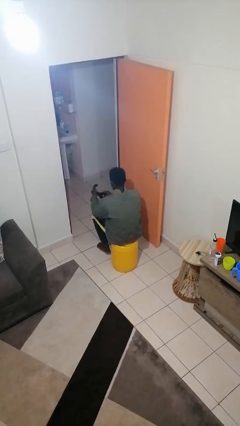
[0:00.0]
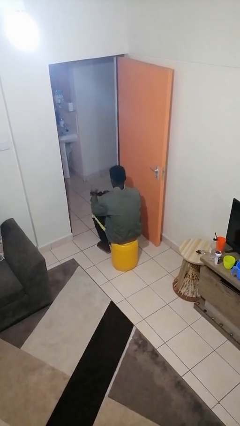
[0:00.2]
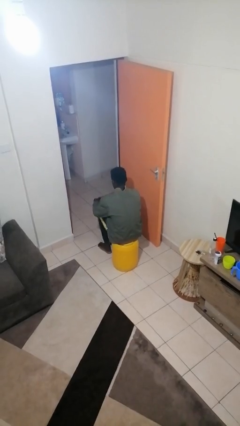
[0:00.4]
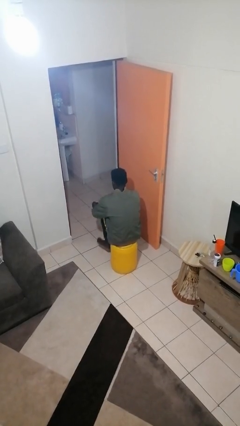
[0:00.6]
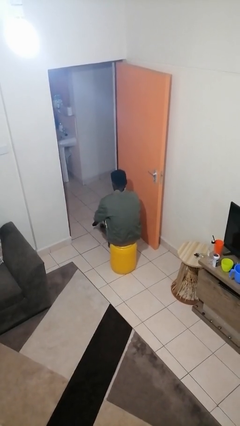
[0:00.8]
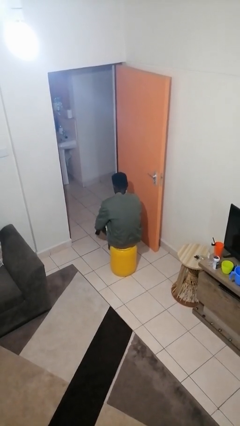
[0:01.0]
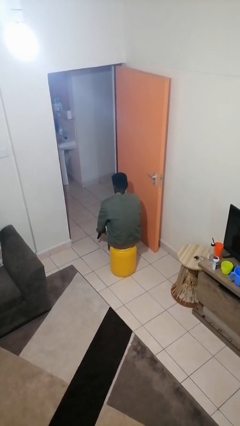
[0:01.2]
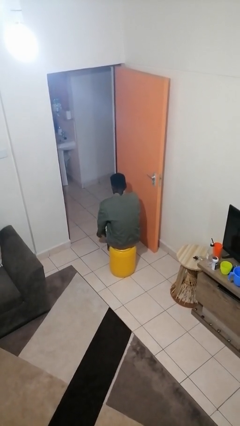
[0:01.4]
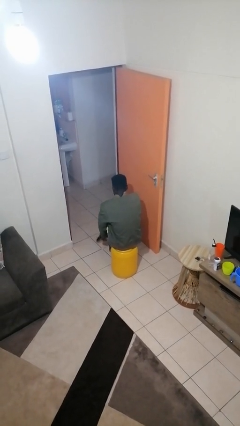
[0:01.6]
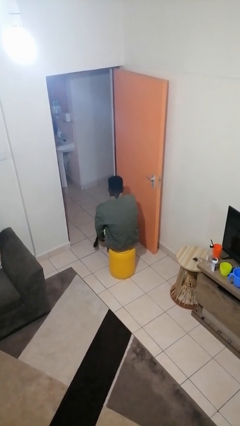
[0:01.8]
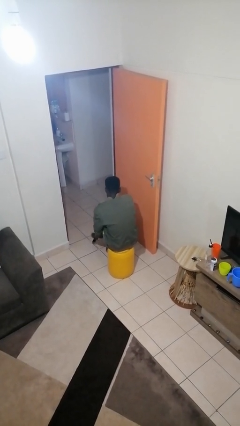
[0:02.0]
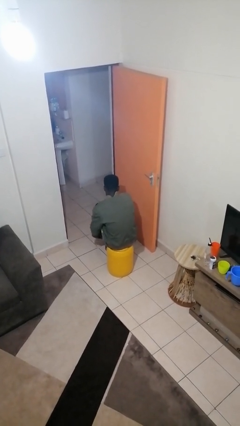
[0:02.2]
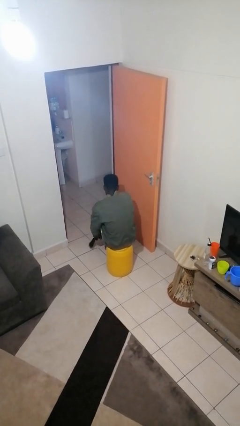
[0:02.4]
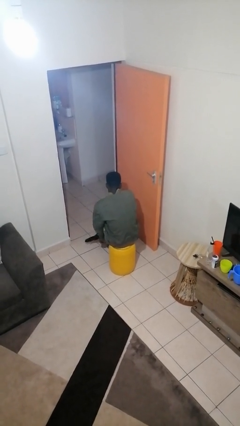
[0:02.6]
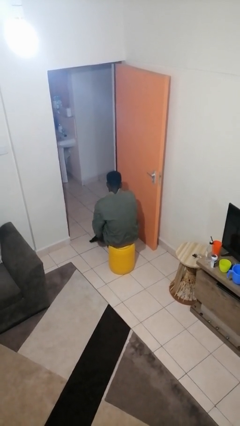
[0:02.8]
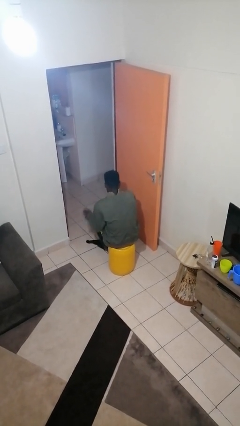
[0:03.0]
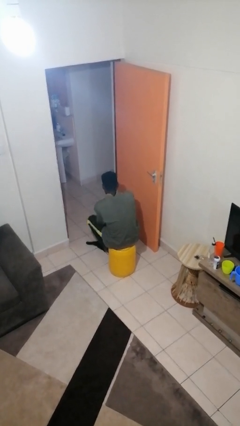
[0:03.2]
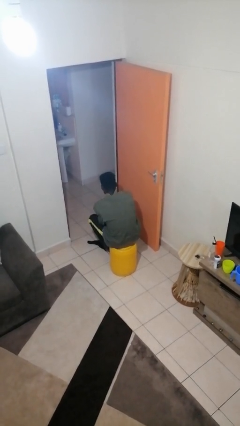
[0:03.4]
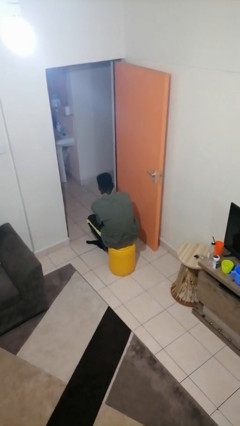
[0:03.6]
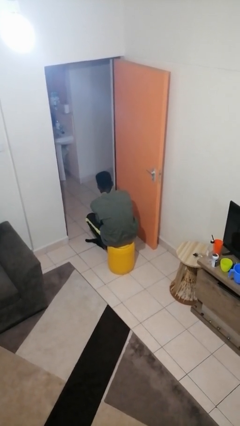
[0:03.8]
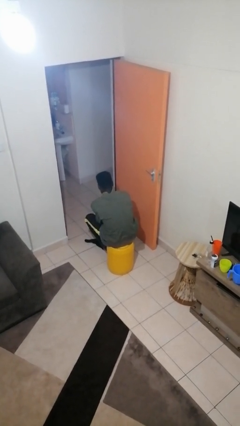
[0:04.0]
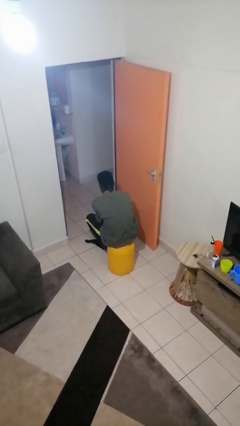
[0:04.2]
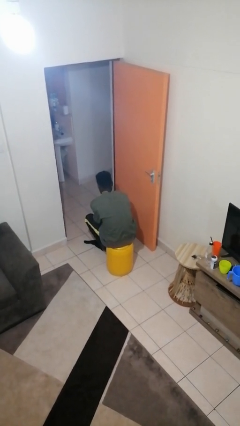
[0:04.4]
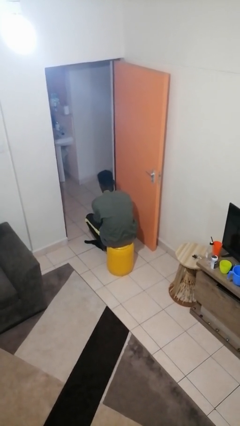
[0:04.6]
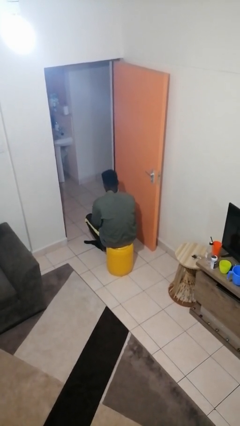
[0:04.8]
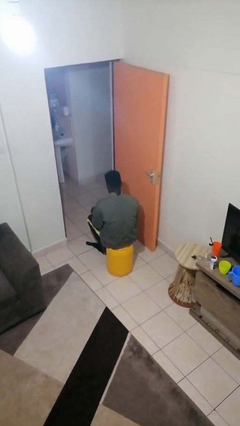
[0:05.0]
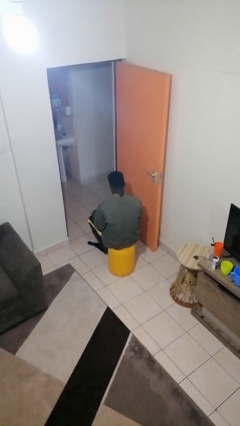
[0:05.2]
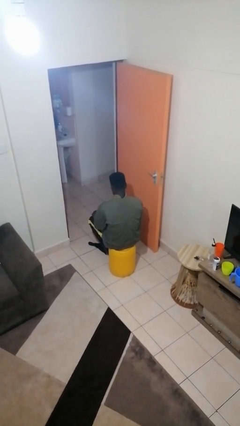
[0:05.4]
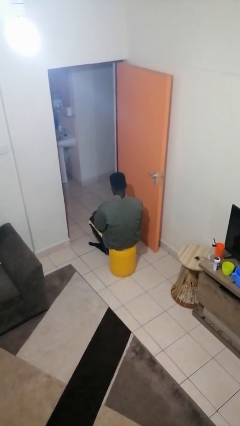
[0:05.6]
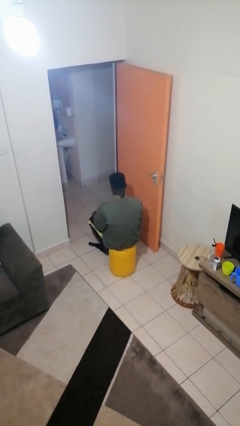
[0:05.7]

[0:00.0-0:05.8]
person puts on socks

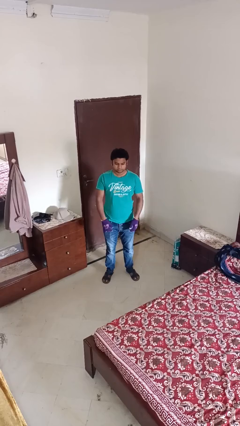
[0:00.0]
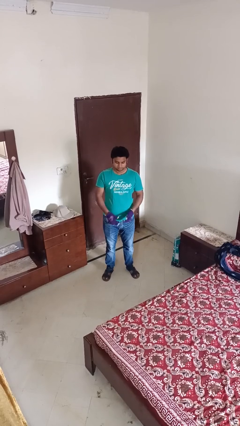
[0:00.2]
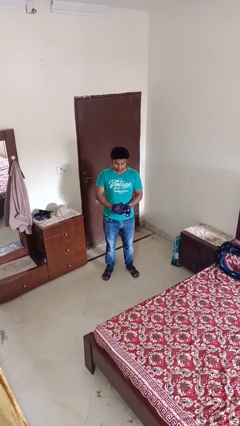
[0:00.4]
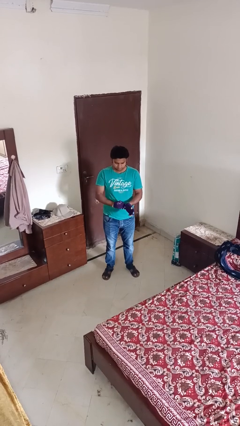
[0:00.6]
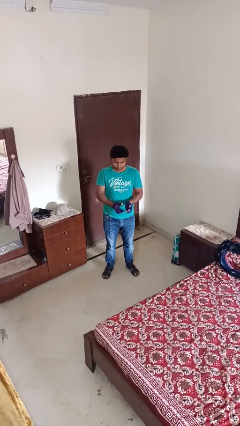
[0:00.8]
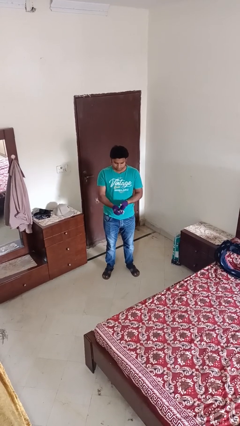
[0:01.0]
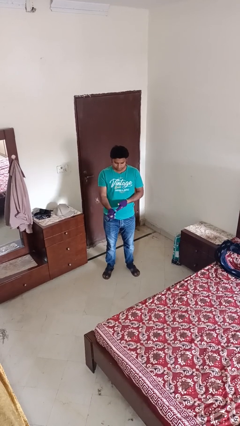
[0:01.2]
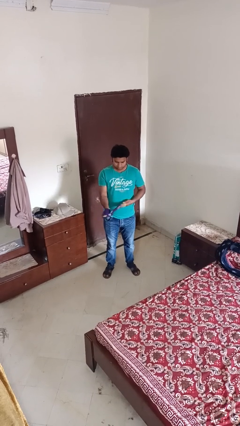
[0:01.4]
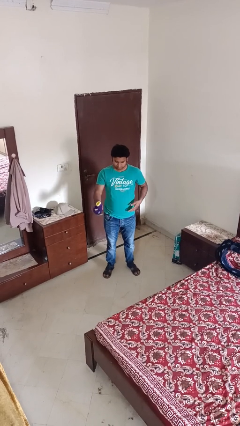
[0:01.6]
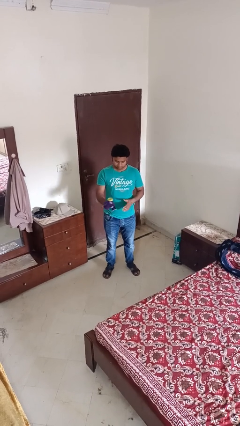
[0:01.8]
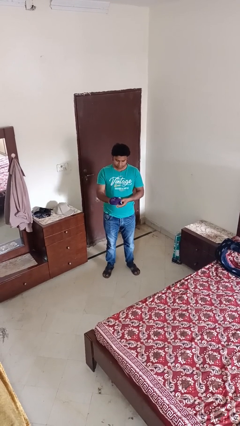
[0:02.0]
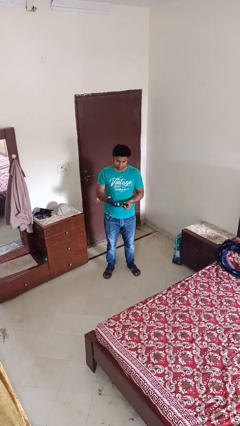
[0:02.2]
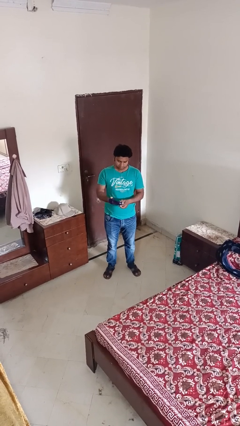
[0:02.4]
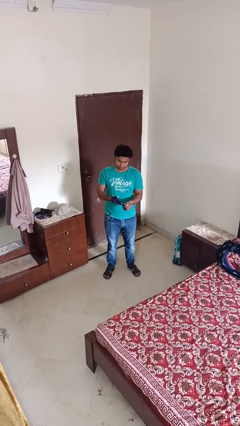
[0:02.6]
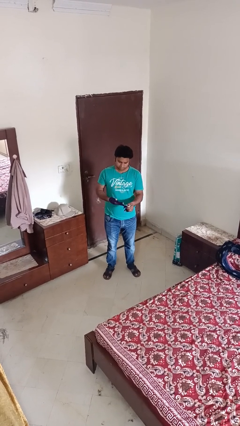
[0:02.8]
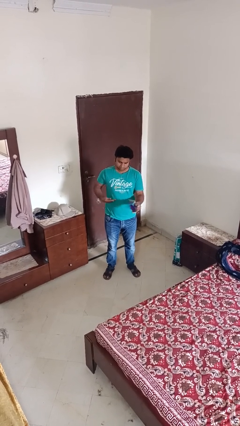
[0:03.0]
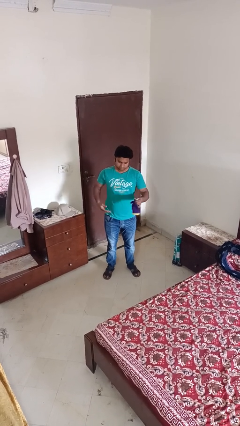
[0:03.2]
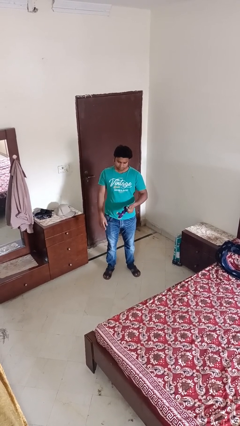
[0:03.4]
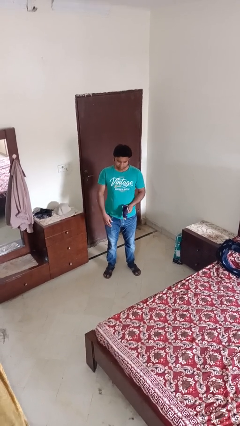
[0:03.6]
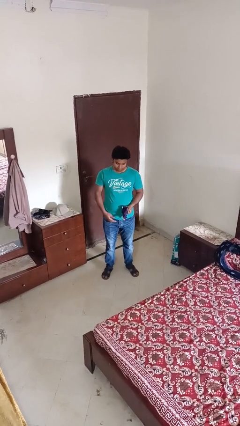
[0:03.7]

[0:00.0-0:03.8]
person takes off gloves

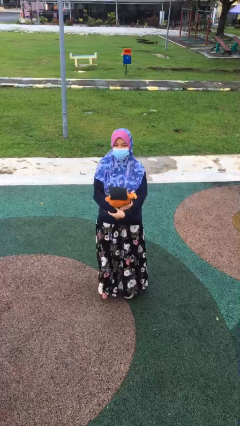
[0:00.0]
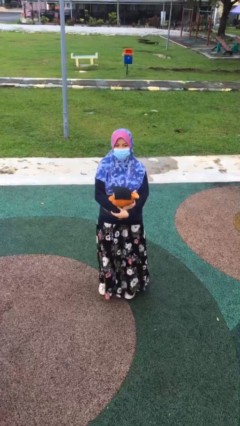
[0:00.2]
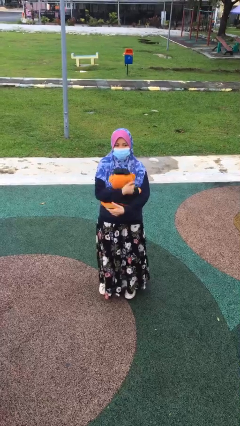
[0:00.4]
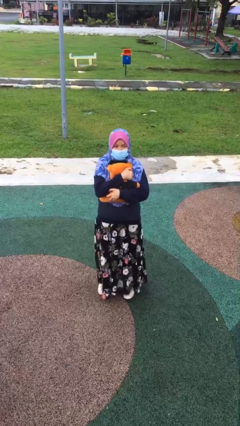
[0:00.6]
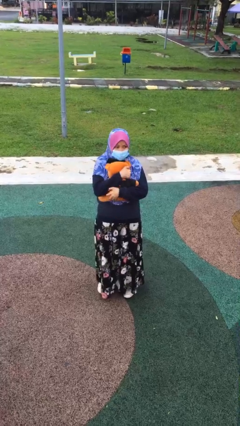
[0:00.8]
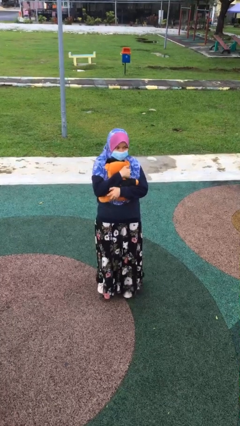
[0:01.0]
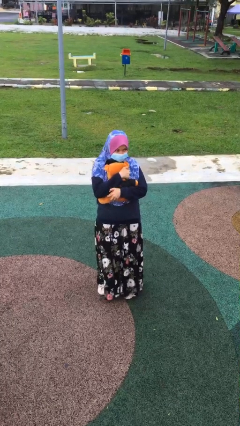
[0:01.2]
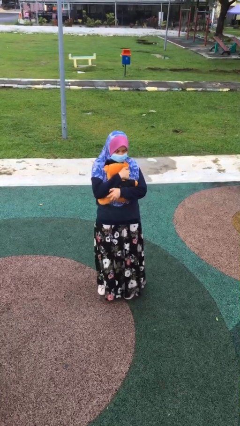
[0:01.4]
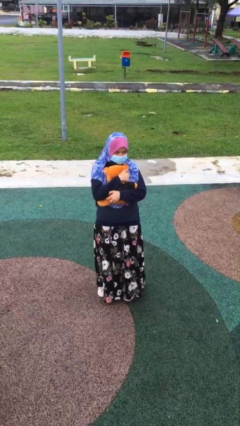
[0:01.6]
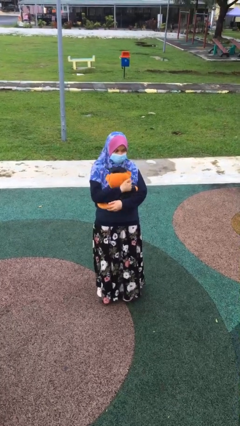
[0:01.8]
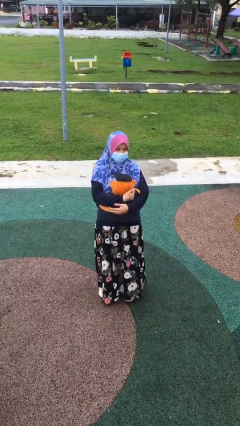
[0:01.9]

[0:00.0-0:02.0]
person hugs stuffed animal

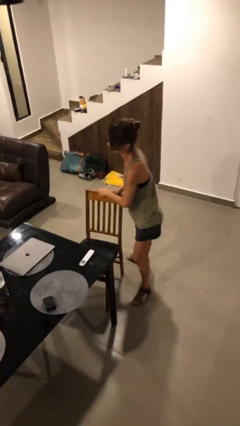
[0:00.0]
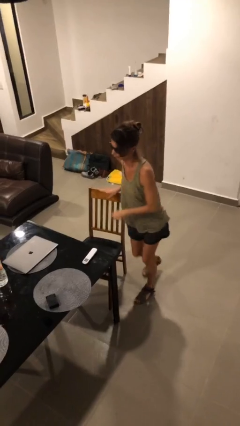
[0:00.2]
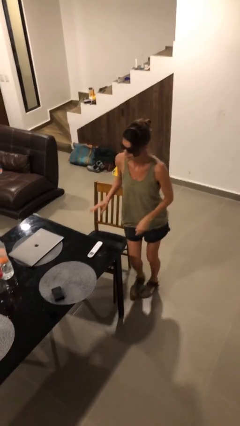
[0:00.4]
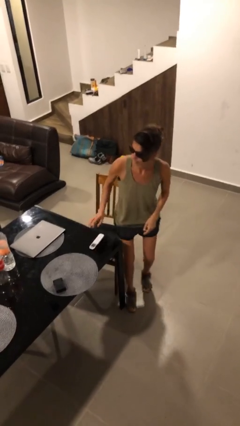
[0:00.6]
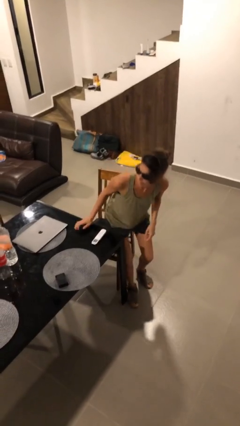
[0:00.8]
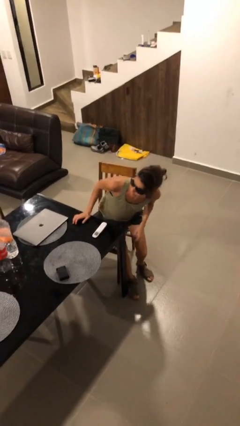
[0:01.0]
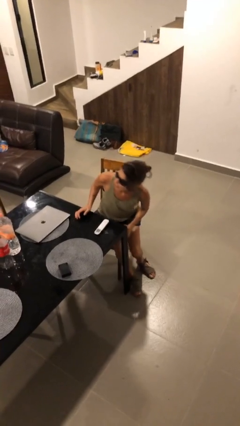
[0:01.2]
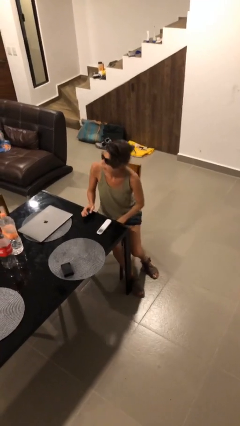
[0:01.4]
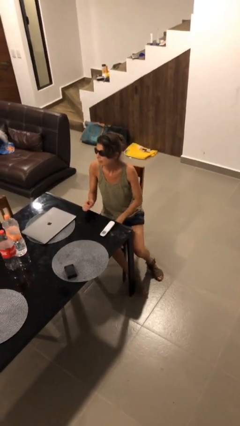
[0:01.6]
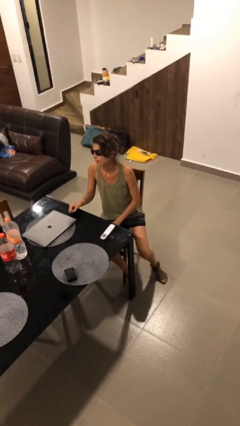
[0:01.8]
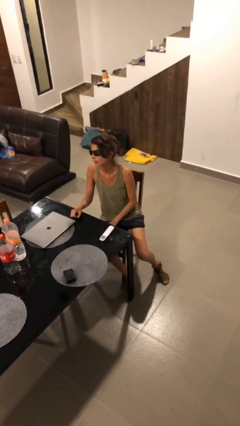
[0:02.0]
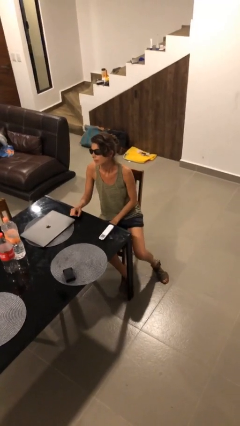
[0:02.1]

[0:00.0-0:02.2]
person sits down

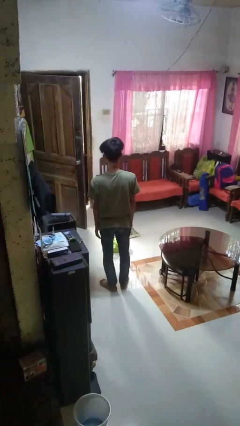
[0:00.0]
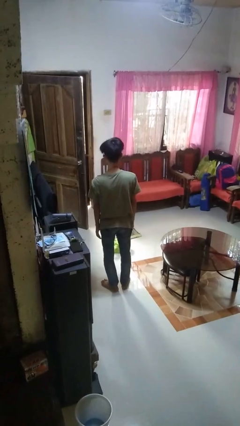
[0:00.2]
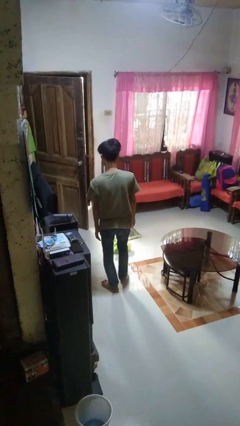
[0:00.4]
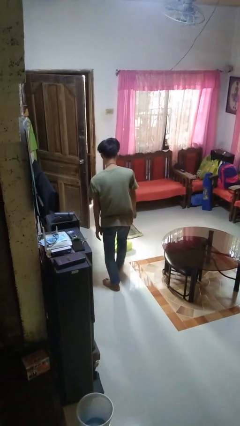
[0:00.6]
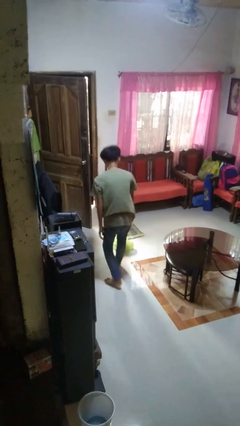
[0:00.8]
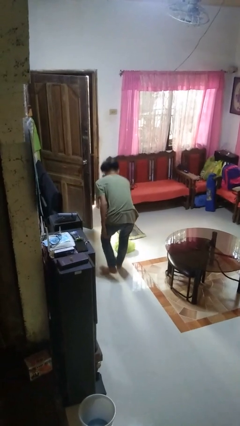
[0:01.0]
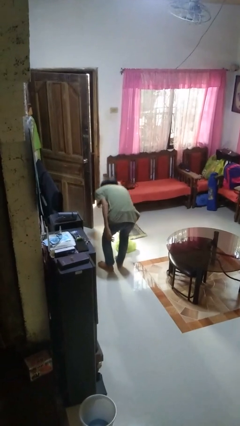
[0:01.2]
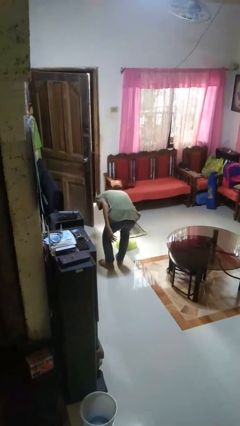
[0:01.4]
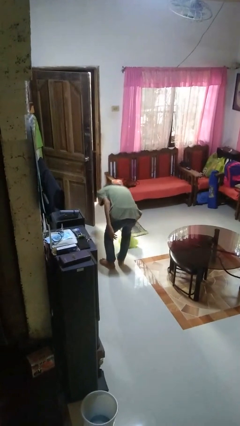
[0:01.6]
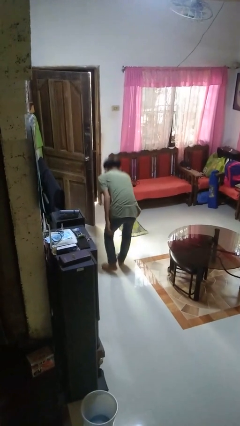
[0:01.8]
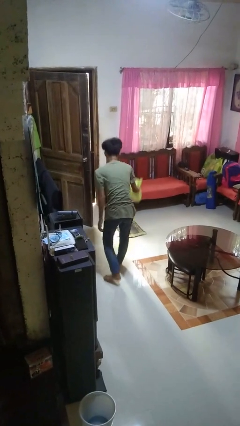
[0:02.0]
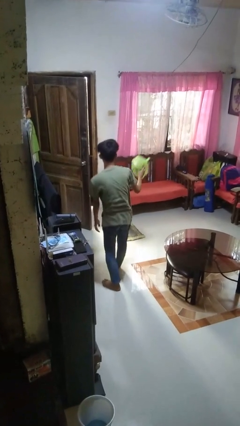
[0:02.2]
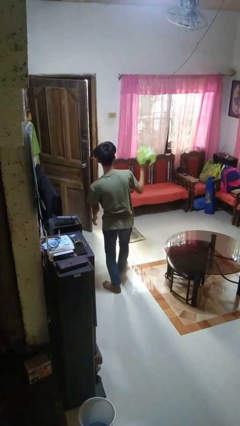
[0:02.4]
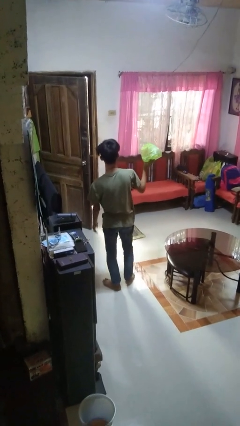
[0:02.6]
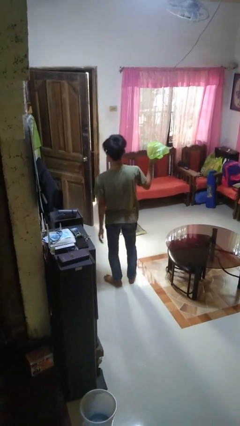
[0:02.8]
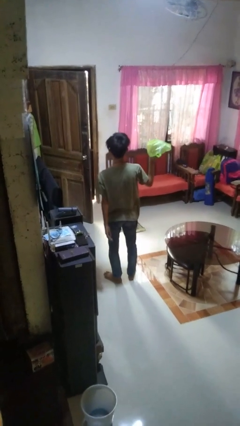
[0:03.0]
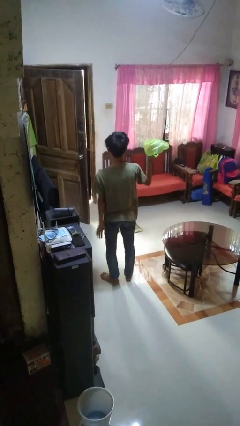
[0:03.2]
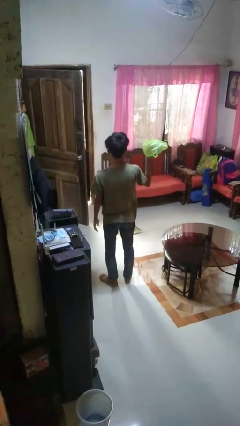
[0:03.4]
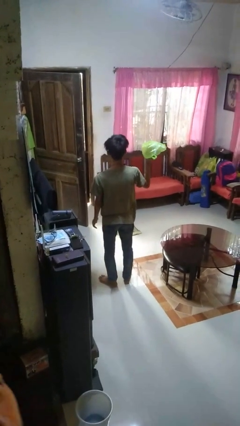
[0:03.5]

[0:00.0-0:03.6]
person picks up object from floor

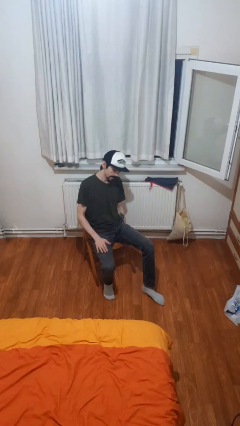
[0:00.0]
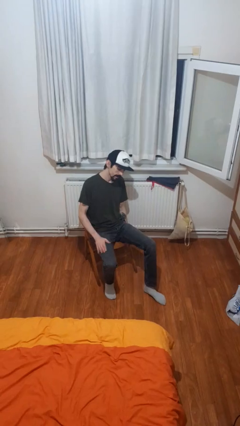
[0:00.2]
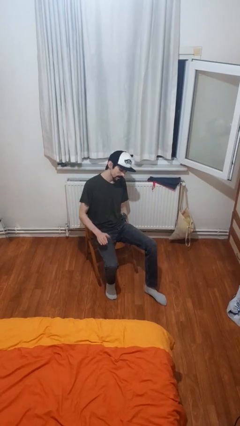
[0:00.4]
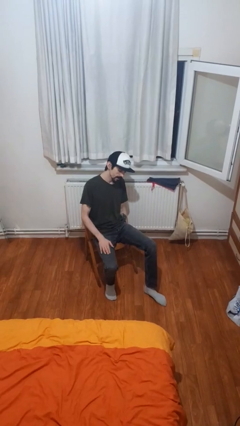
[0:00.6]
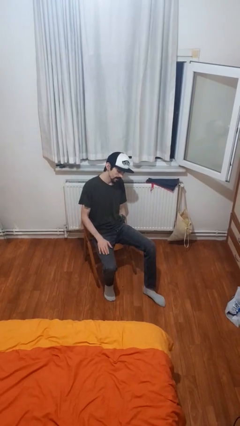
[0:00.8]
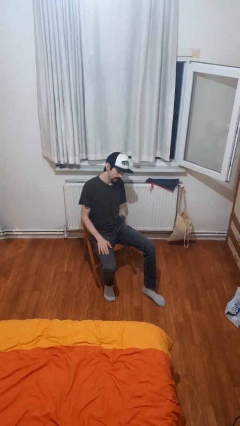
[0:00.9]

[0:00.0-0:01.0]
person slaps hands on thighs
